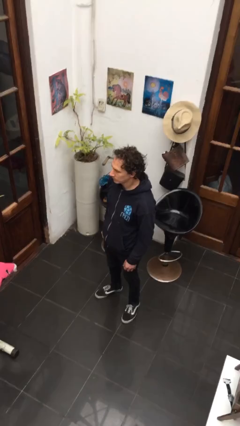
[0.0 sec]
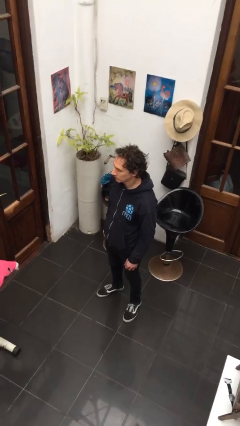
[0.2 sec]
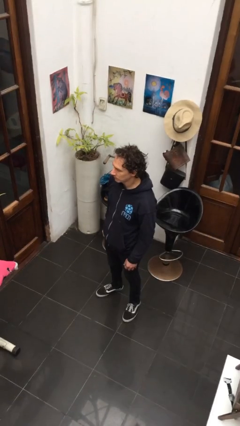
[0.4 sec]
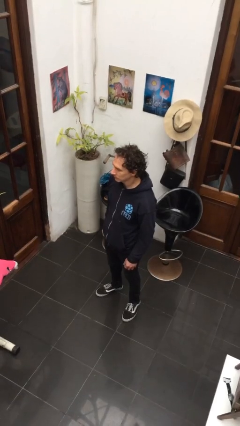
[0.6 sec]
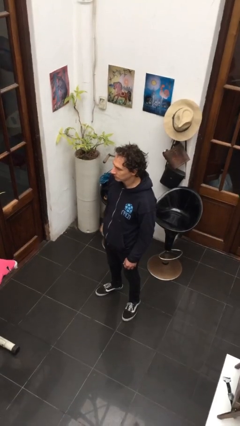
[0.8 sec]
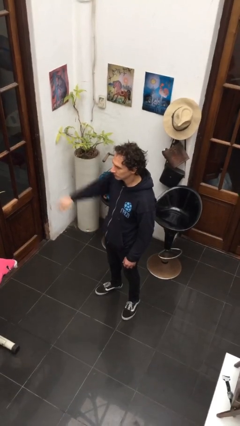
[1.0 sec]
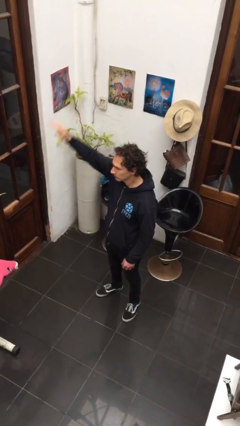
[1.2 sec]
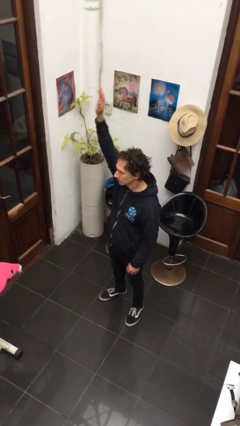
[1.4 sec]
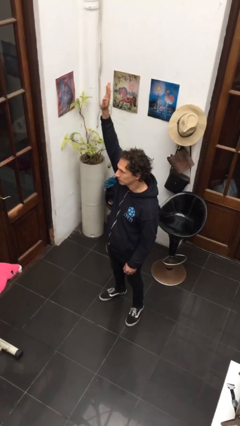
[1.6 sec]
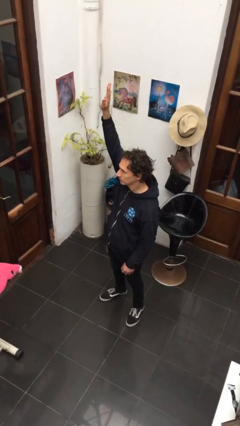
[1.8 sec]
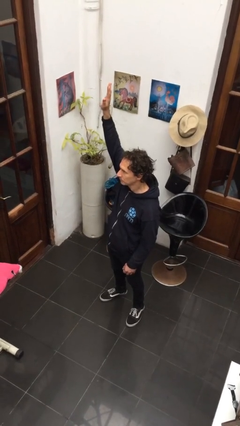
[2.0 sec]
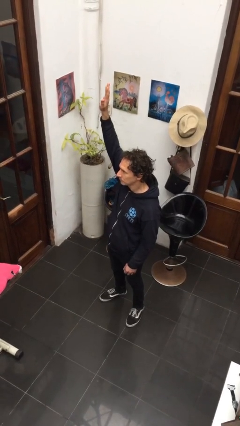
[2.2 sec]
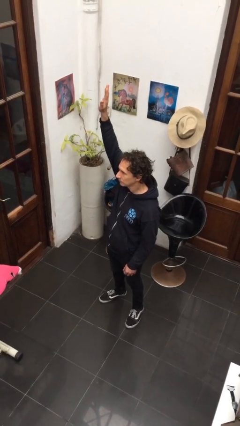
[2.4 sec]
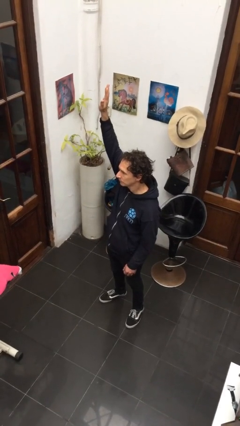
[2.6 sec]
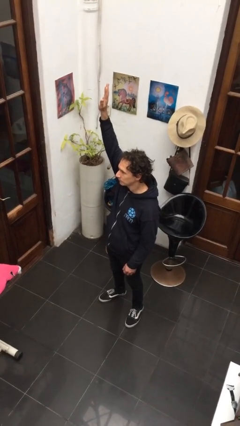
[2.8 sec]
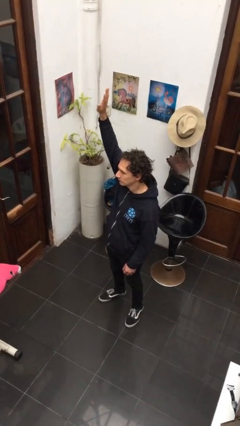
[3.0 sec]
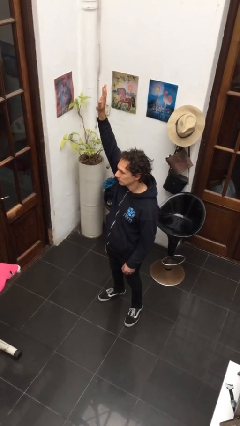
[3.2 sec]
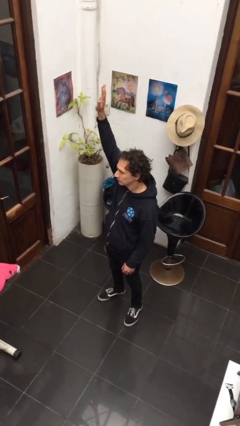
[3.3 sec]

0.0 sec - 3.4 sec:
person gestures raise hand

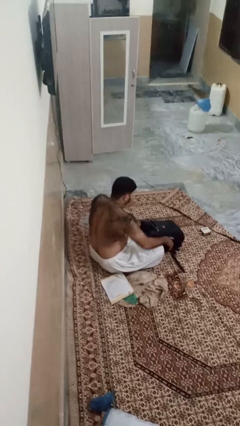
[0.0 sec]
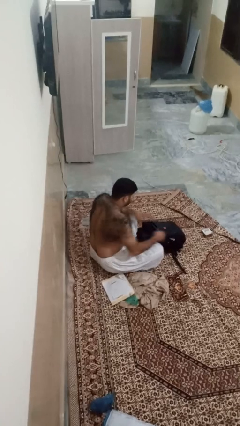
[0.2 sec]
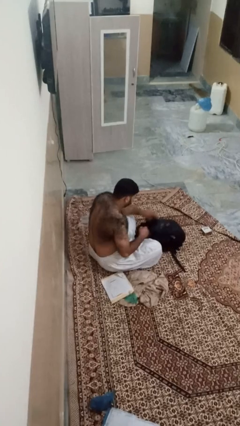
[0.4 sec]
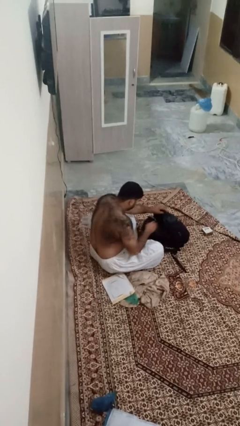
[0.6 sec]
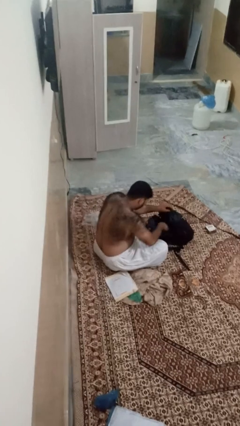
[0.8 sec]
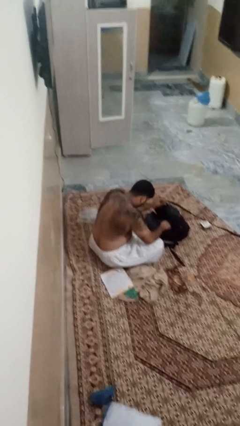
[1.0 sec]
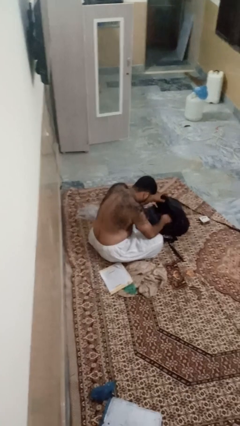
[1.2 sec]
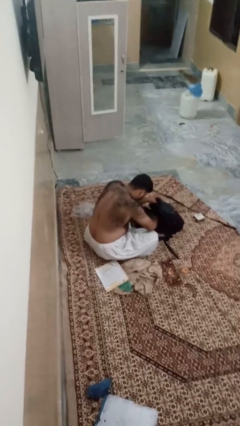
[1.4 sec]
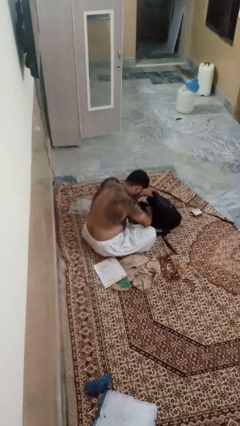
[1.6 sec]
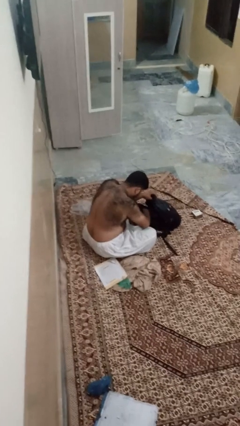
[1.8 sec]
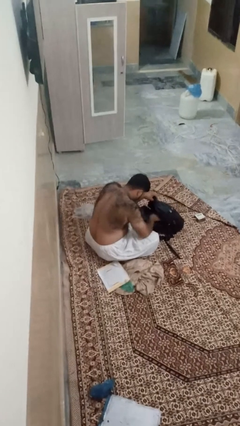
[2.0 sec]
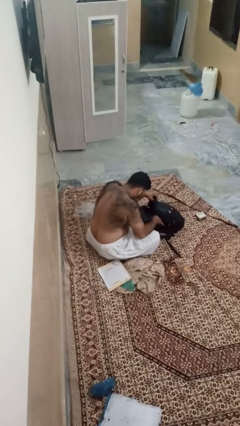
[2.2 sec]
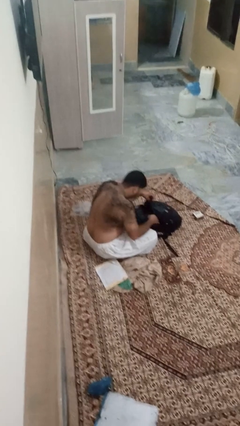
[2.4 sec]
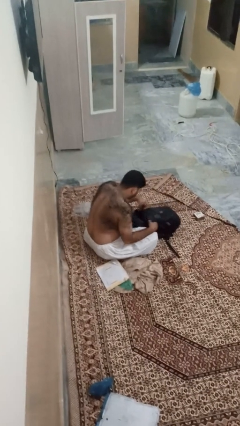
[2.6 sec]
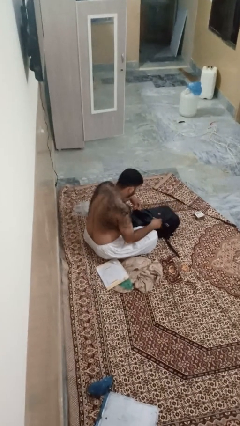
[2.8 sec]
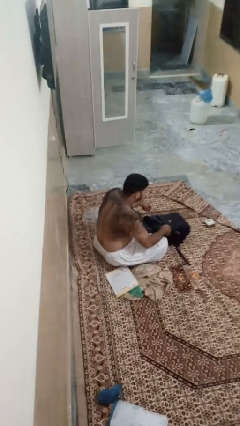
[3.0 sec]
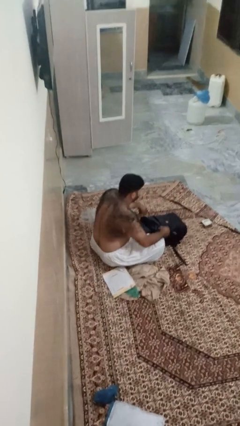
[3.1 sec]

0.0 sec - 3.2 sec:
person searches in bag

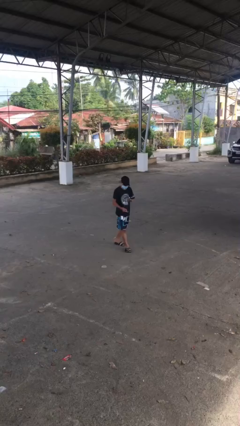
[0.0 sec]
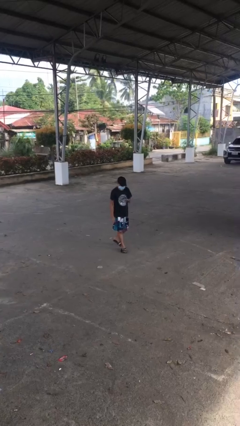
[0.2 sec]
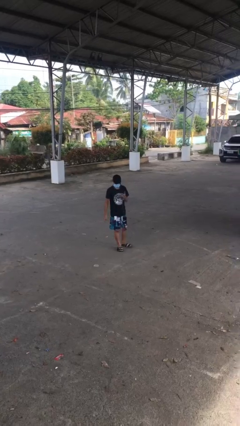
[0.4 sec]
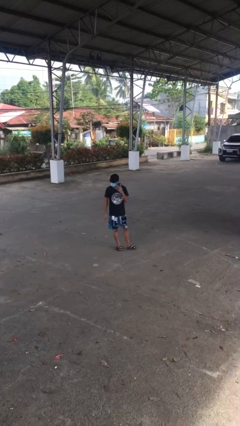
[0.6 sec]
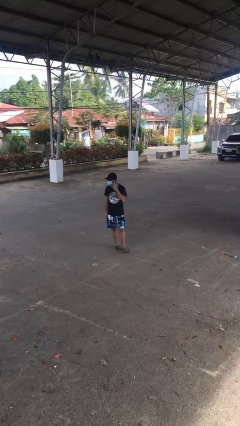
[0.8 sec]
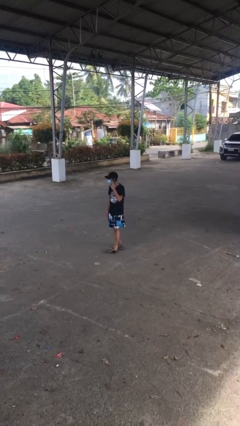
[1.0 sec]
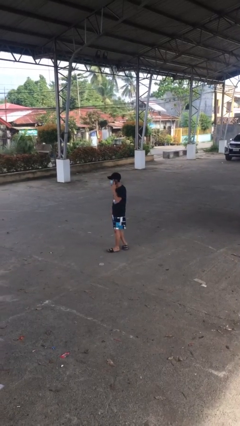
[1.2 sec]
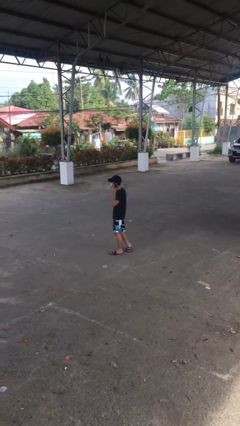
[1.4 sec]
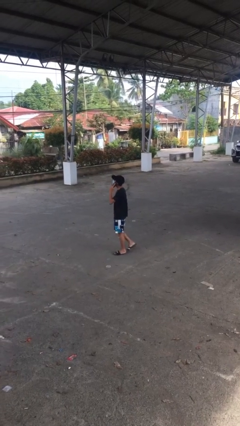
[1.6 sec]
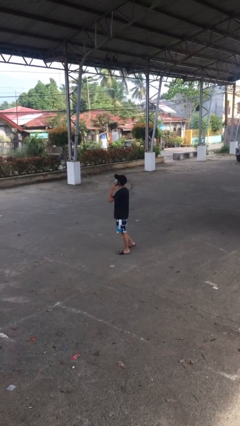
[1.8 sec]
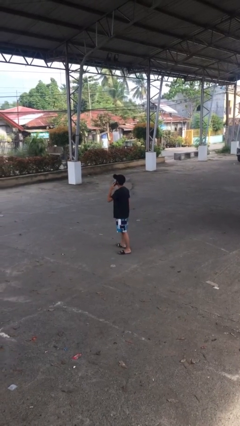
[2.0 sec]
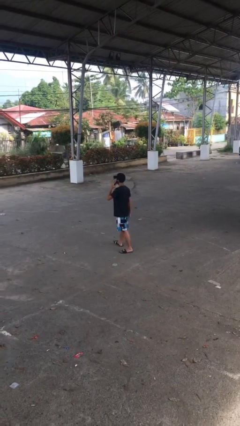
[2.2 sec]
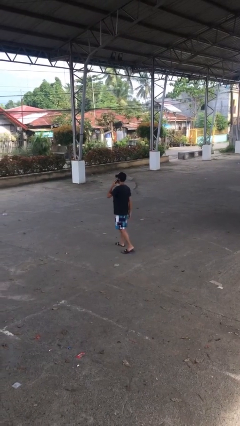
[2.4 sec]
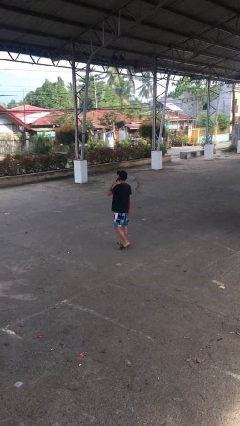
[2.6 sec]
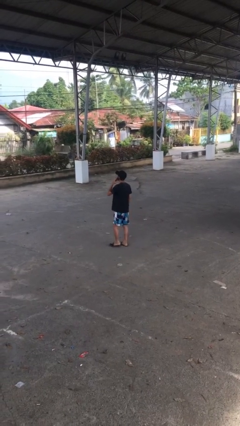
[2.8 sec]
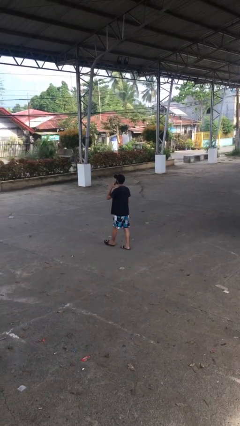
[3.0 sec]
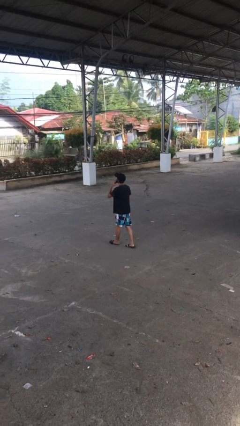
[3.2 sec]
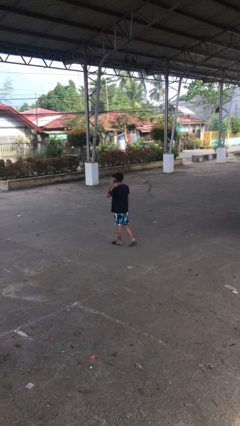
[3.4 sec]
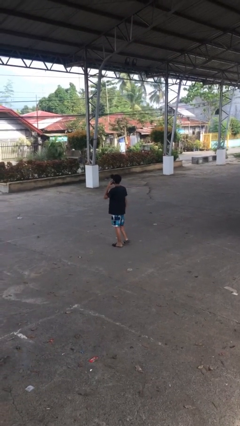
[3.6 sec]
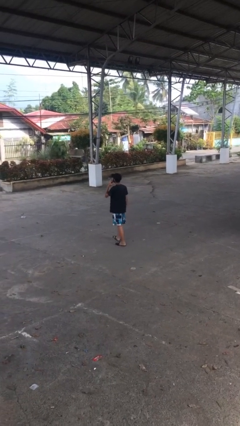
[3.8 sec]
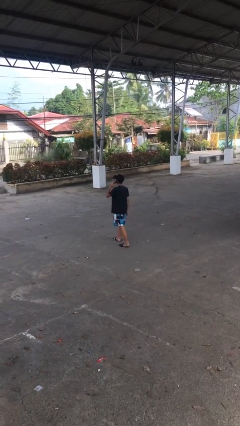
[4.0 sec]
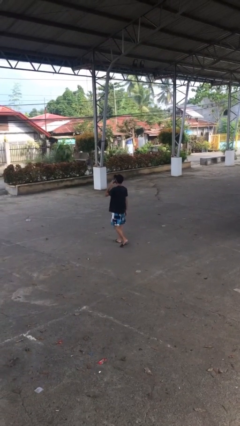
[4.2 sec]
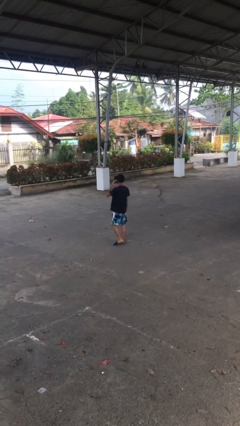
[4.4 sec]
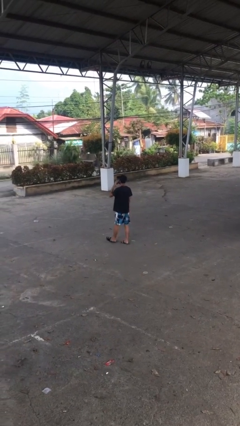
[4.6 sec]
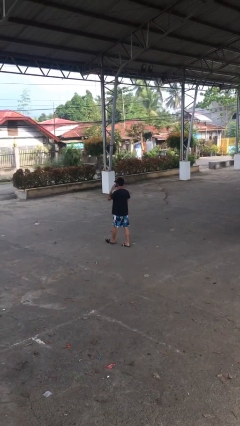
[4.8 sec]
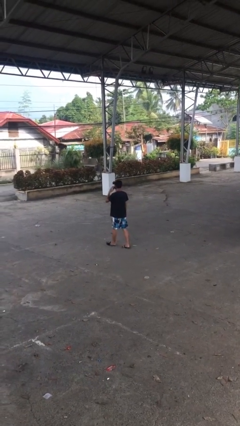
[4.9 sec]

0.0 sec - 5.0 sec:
person talks on phone

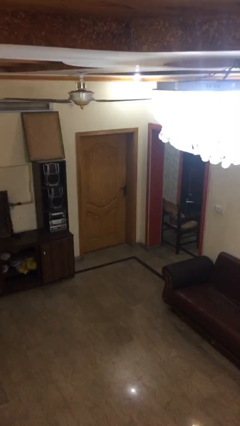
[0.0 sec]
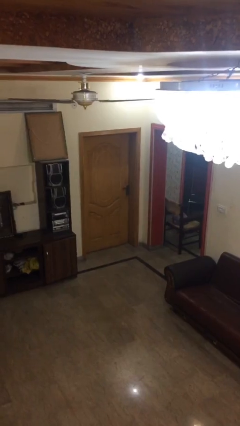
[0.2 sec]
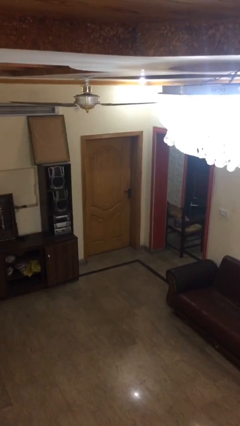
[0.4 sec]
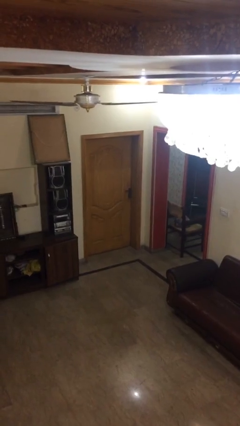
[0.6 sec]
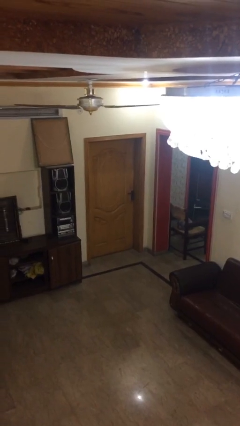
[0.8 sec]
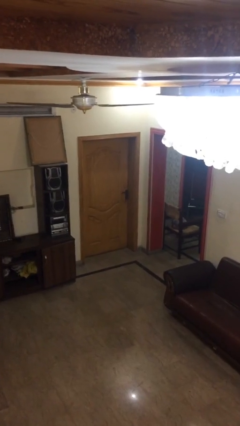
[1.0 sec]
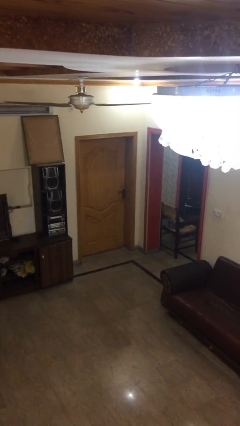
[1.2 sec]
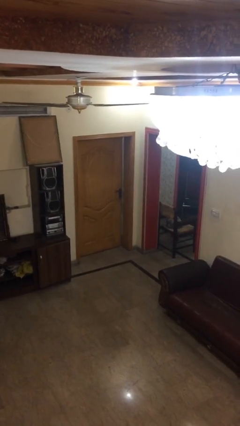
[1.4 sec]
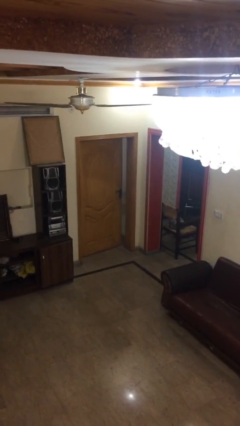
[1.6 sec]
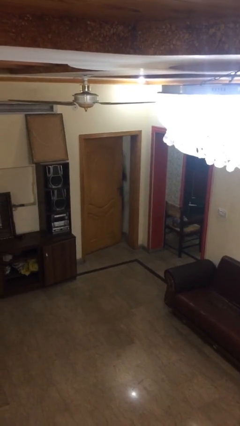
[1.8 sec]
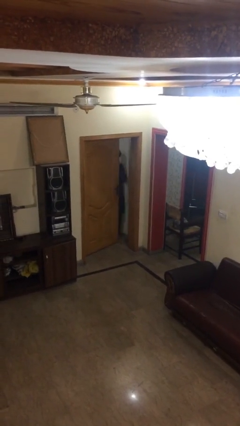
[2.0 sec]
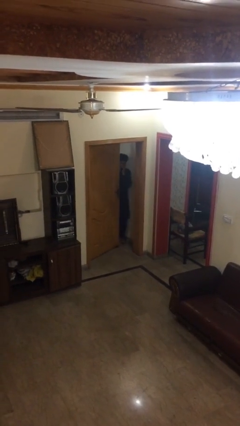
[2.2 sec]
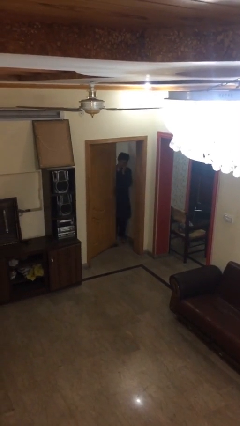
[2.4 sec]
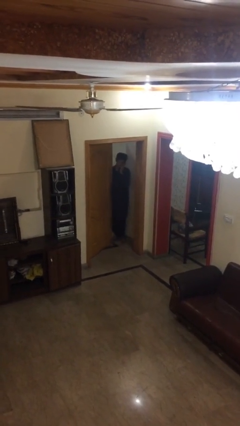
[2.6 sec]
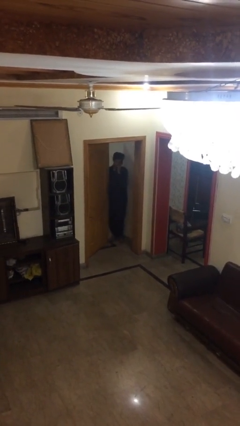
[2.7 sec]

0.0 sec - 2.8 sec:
person opens facility door

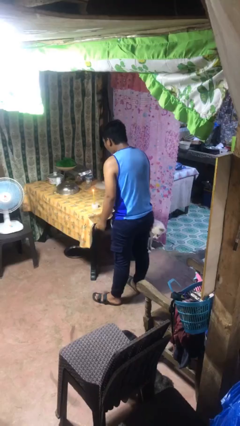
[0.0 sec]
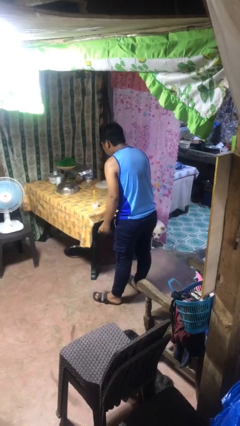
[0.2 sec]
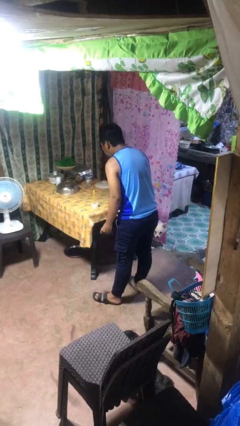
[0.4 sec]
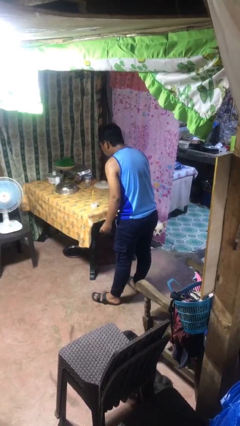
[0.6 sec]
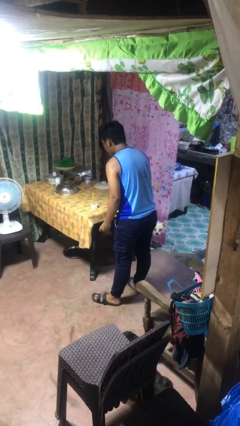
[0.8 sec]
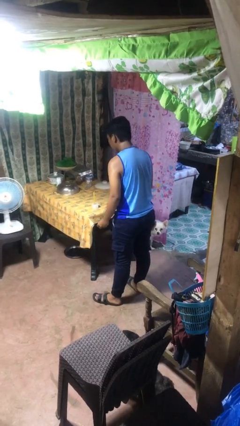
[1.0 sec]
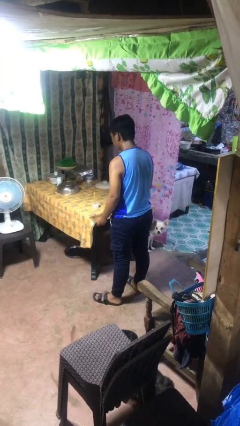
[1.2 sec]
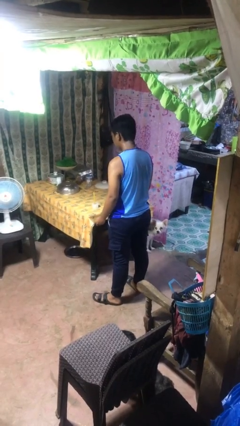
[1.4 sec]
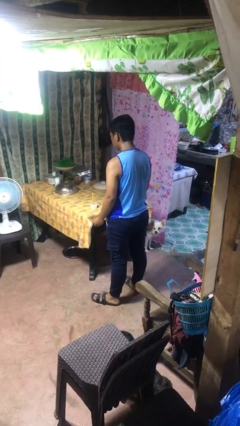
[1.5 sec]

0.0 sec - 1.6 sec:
person extinguishes candle

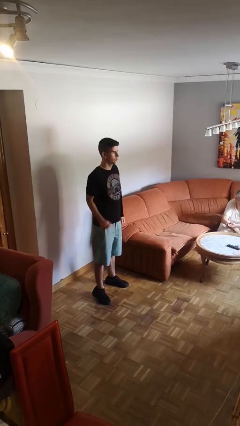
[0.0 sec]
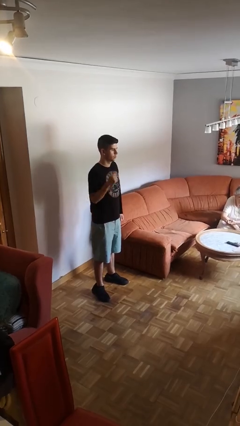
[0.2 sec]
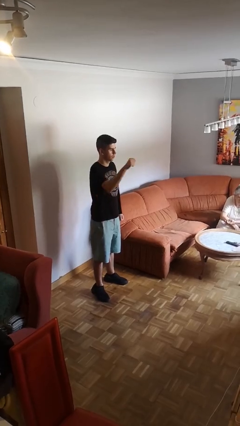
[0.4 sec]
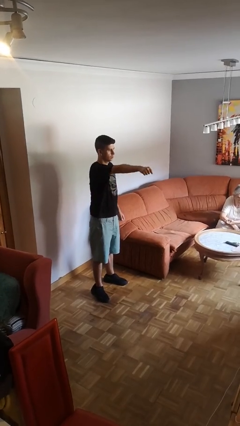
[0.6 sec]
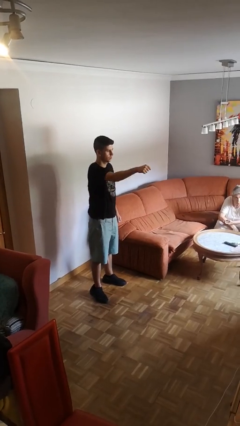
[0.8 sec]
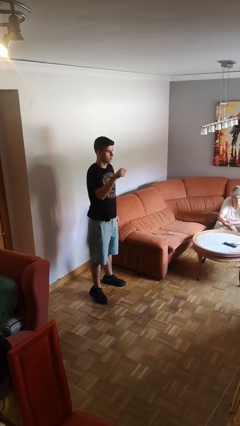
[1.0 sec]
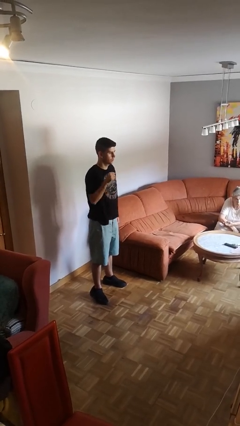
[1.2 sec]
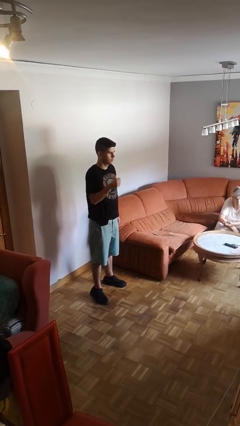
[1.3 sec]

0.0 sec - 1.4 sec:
person punches
